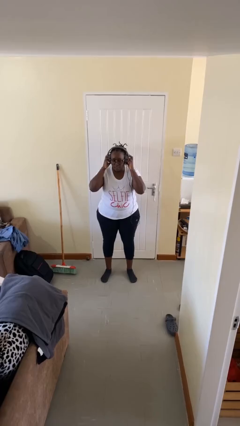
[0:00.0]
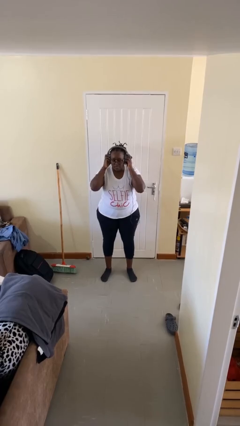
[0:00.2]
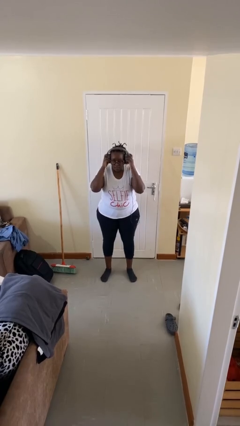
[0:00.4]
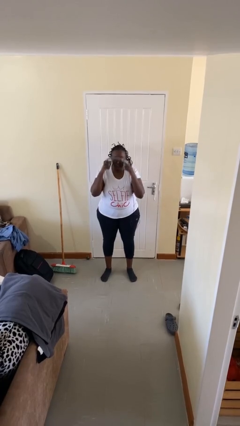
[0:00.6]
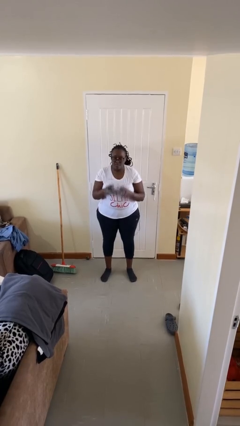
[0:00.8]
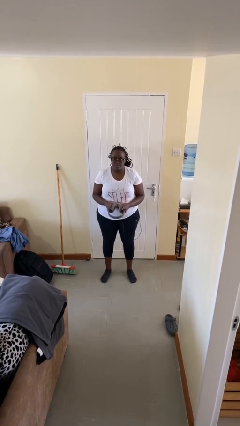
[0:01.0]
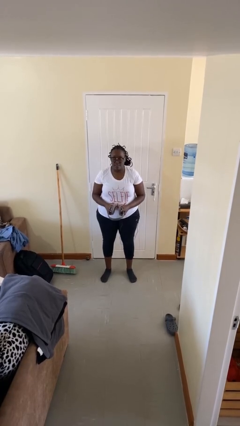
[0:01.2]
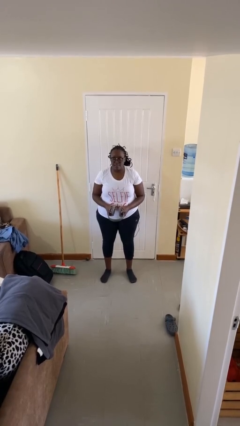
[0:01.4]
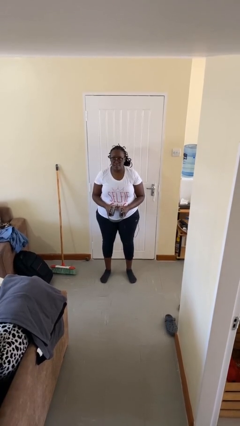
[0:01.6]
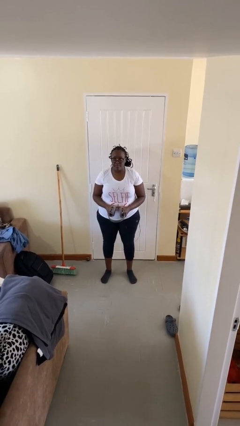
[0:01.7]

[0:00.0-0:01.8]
person takes off headphones

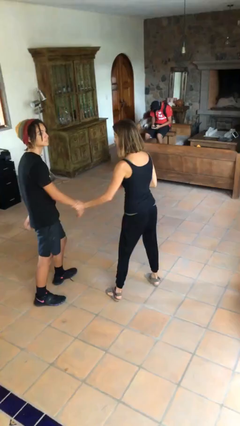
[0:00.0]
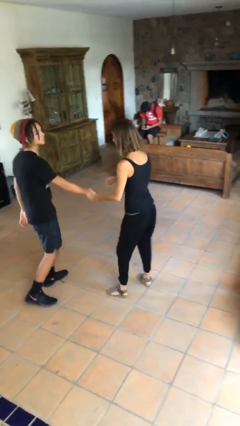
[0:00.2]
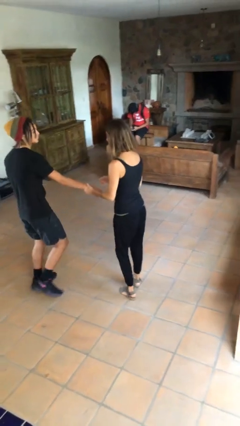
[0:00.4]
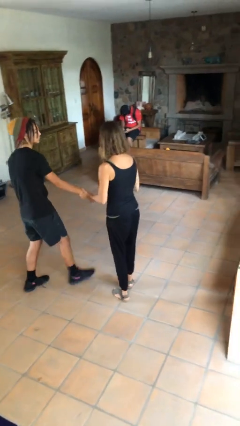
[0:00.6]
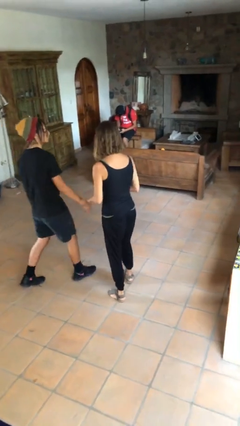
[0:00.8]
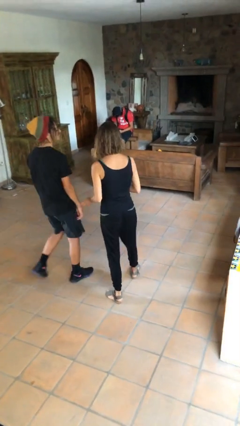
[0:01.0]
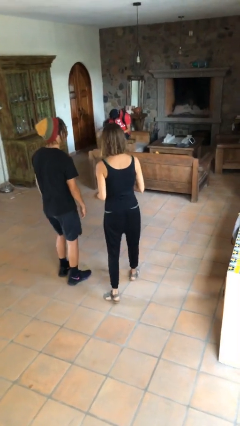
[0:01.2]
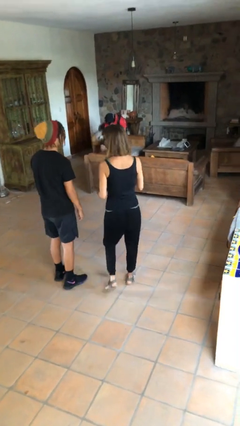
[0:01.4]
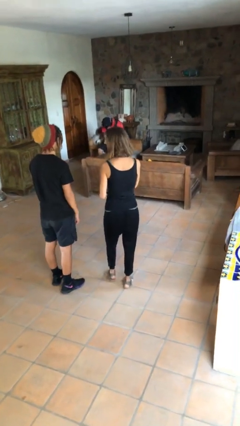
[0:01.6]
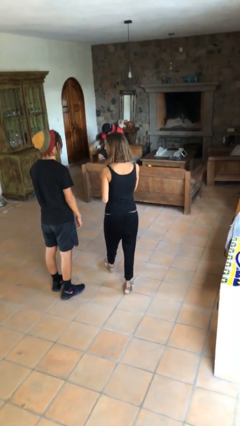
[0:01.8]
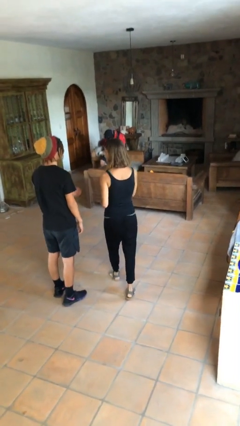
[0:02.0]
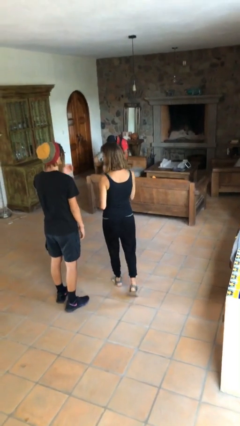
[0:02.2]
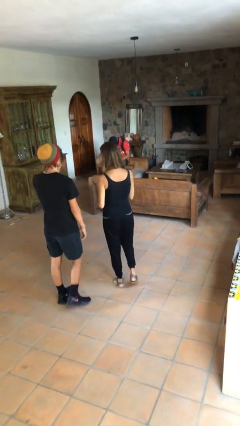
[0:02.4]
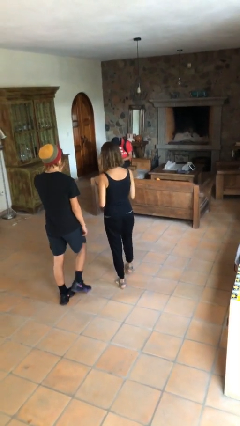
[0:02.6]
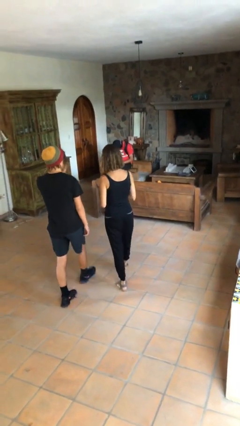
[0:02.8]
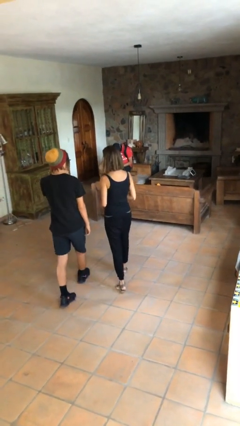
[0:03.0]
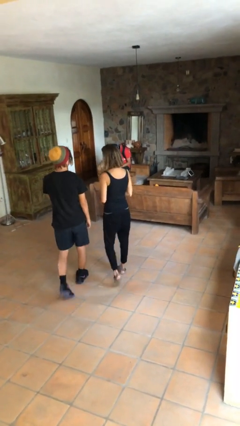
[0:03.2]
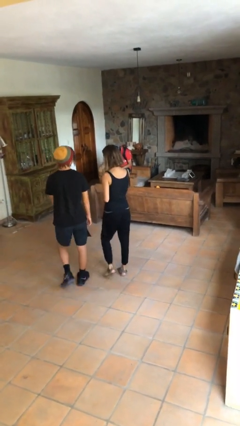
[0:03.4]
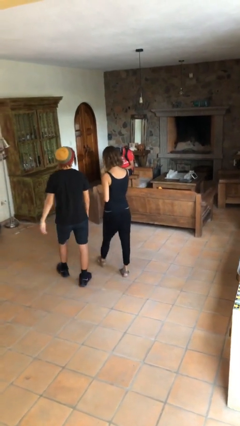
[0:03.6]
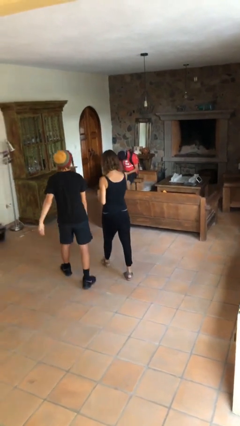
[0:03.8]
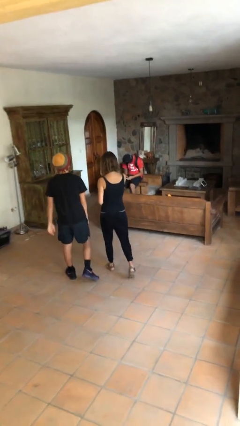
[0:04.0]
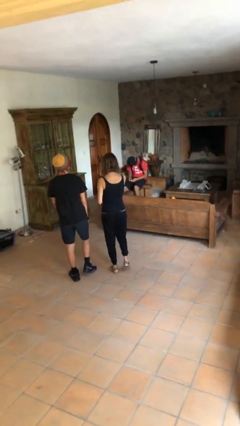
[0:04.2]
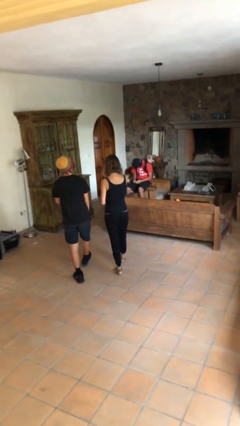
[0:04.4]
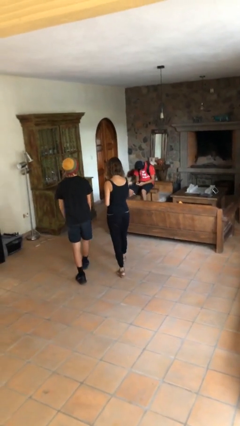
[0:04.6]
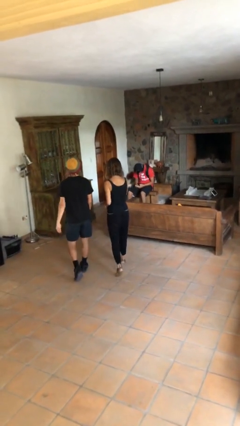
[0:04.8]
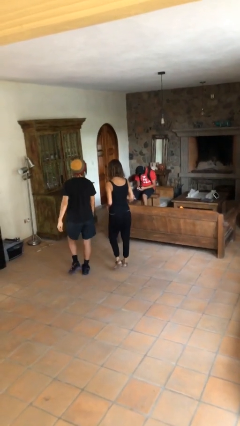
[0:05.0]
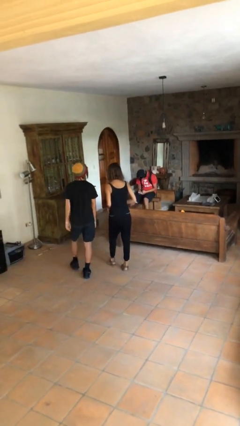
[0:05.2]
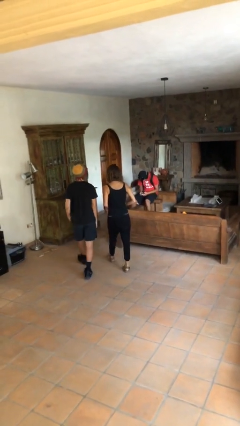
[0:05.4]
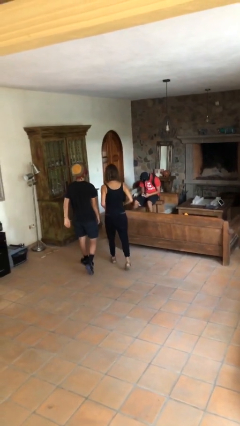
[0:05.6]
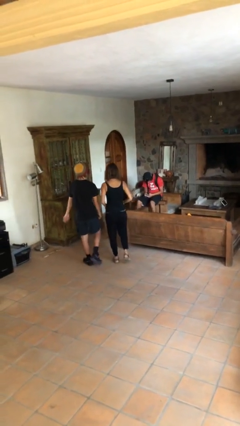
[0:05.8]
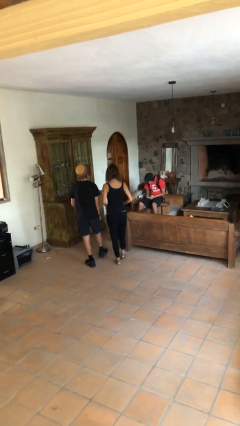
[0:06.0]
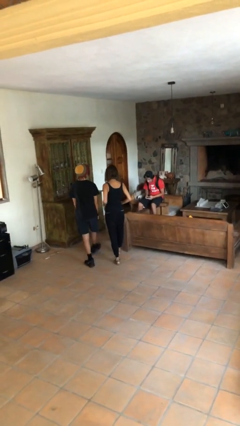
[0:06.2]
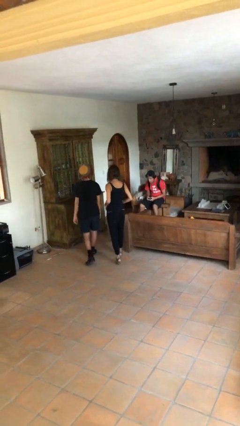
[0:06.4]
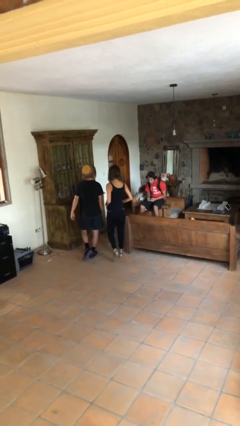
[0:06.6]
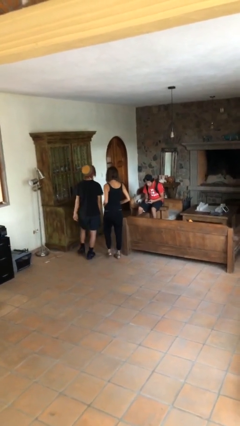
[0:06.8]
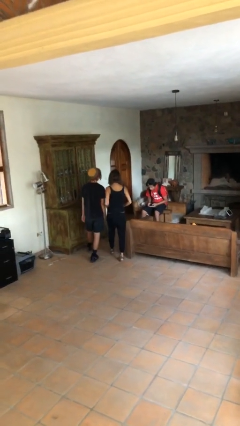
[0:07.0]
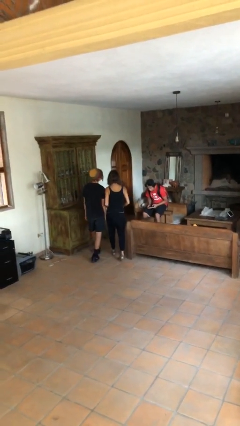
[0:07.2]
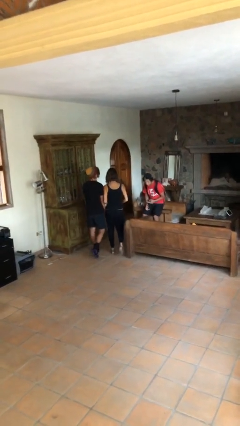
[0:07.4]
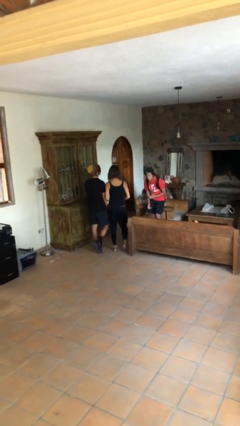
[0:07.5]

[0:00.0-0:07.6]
person talks to person

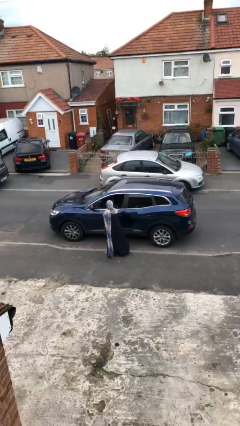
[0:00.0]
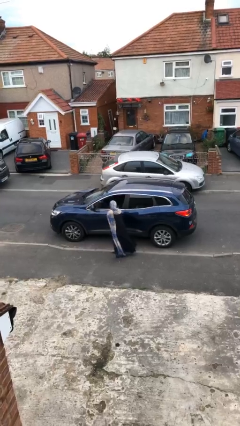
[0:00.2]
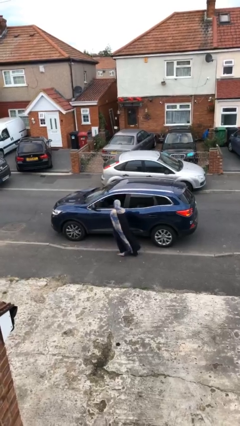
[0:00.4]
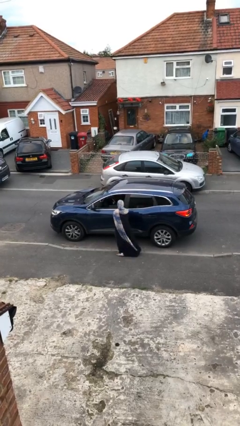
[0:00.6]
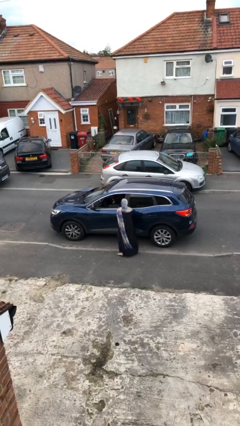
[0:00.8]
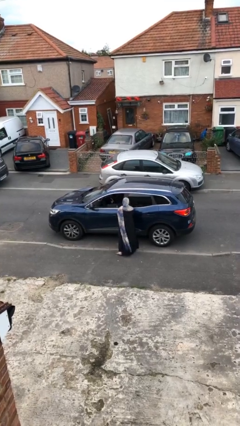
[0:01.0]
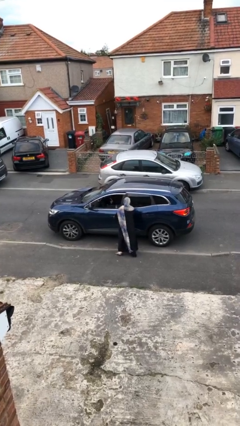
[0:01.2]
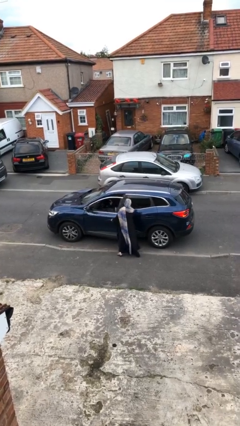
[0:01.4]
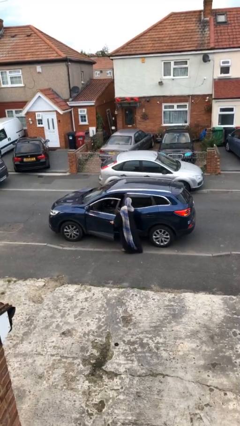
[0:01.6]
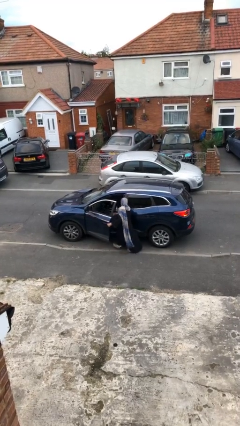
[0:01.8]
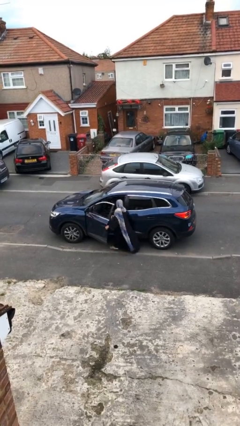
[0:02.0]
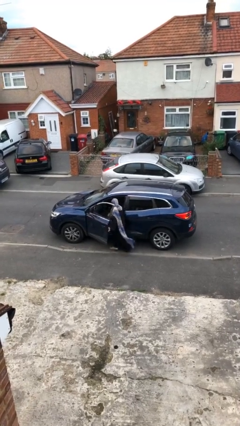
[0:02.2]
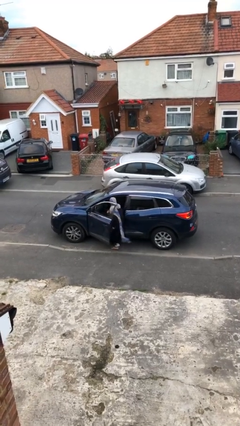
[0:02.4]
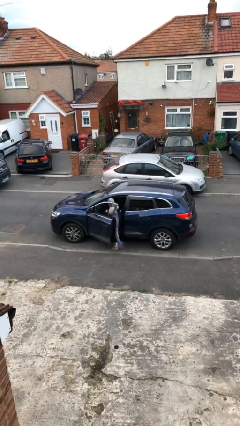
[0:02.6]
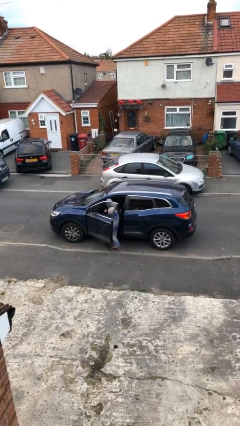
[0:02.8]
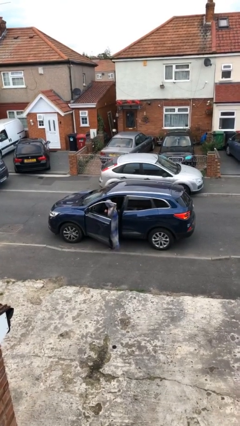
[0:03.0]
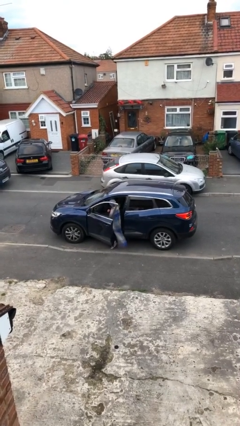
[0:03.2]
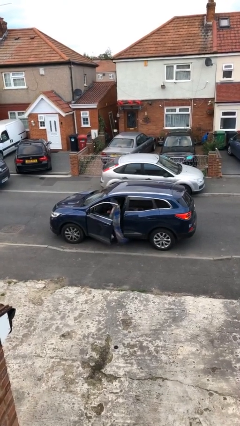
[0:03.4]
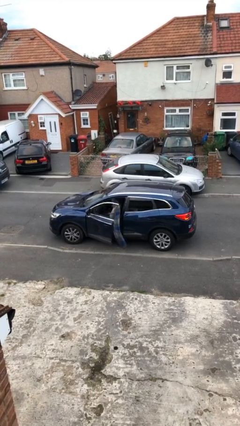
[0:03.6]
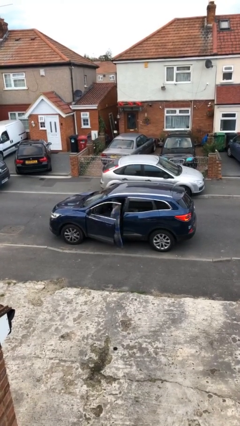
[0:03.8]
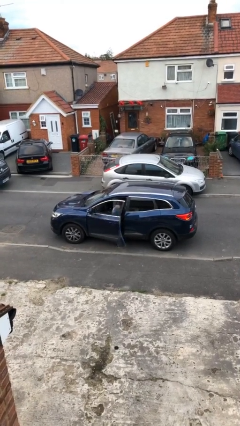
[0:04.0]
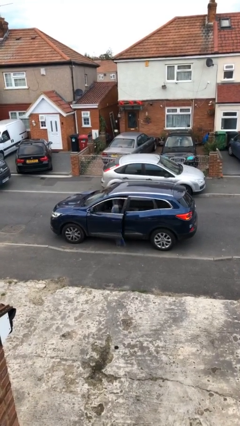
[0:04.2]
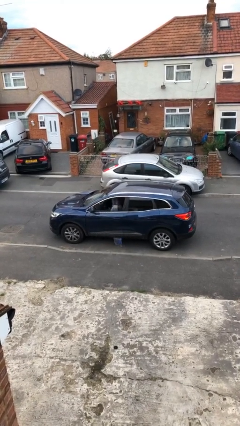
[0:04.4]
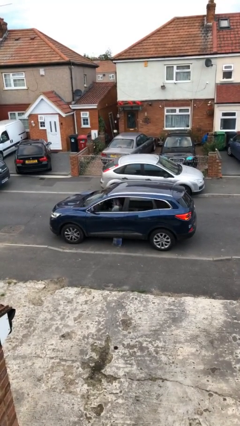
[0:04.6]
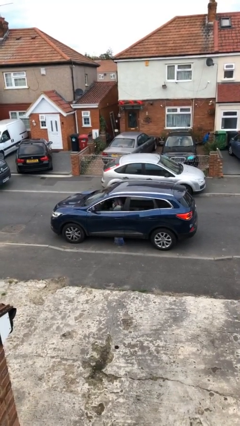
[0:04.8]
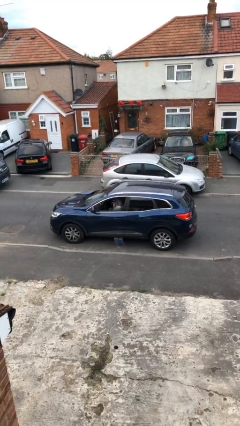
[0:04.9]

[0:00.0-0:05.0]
car picks up person

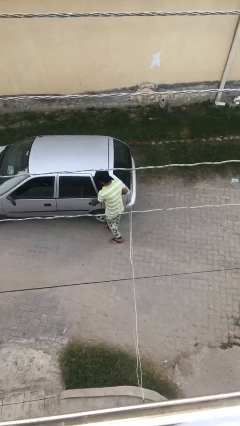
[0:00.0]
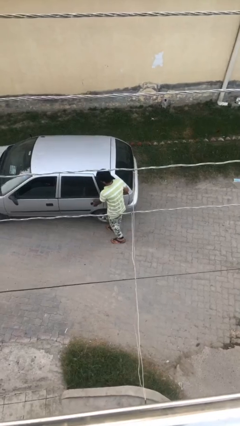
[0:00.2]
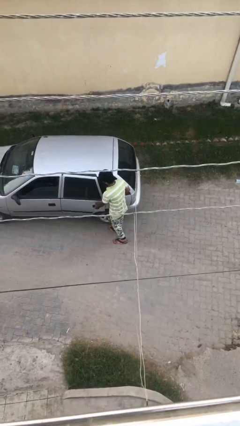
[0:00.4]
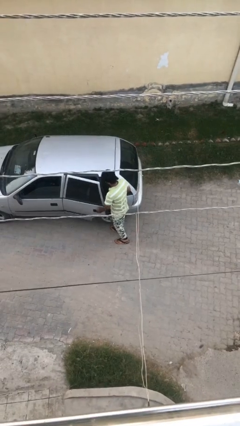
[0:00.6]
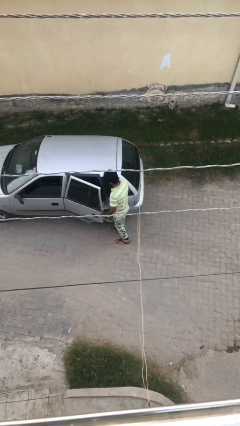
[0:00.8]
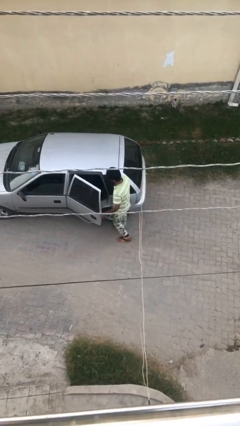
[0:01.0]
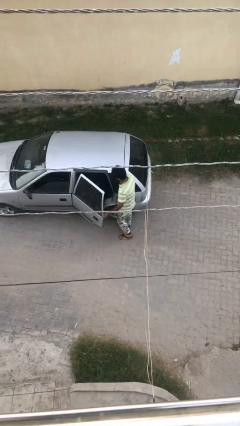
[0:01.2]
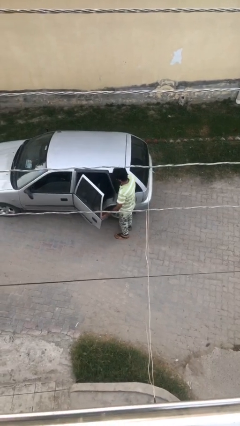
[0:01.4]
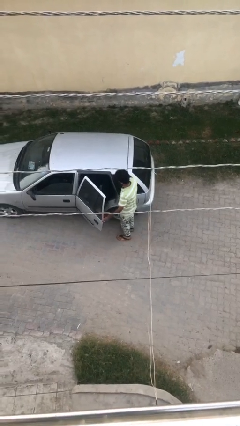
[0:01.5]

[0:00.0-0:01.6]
person opens car door

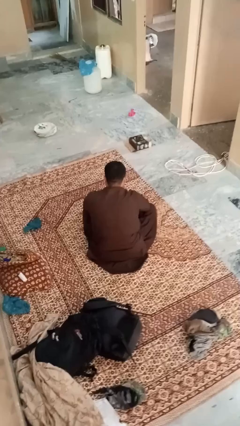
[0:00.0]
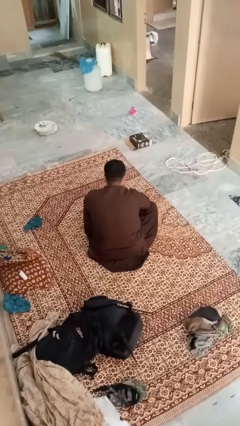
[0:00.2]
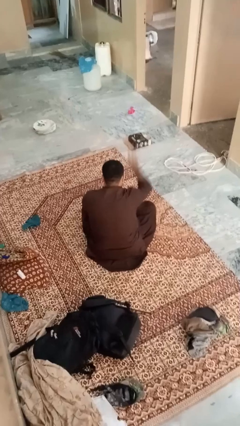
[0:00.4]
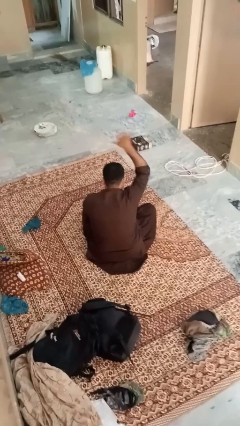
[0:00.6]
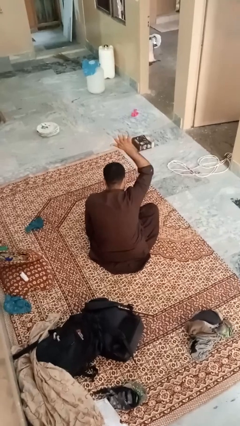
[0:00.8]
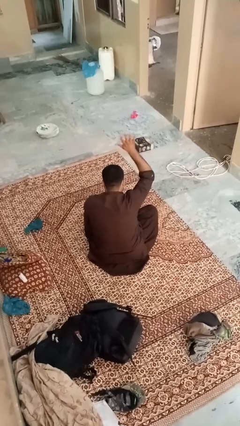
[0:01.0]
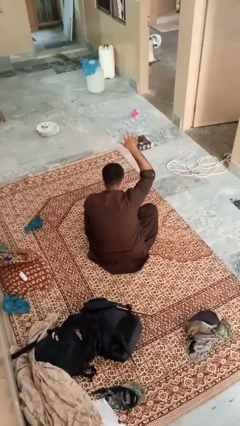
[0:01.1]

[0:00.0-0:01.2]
person gestures number five

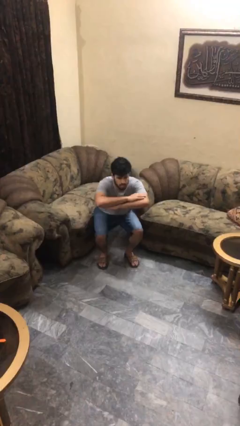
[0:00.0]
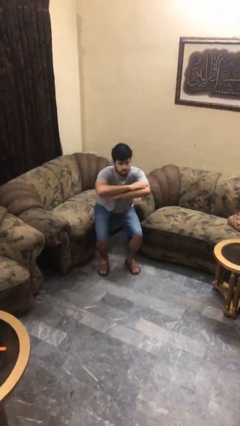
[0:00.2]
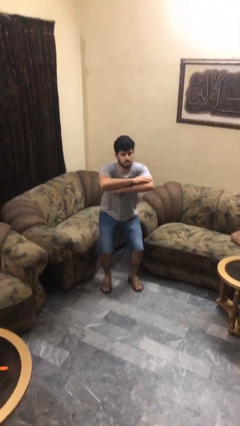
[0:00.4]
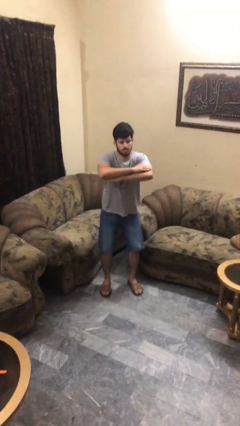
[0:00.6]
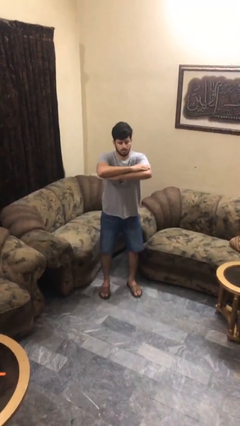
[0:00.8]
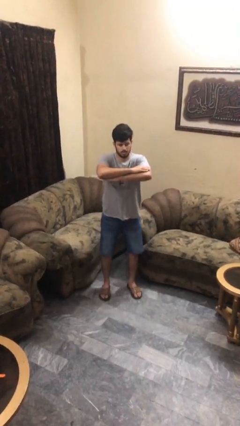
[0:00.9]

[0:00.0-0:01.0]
person stands up
